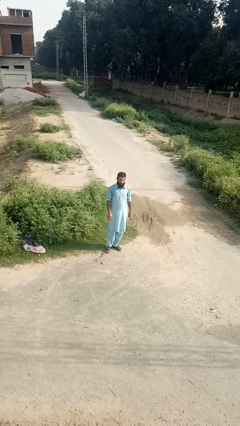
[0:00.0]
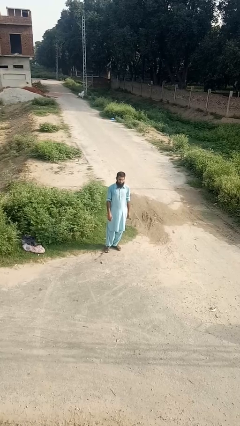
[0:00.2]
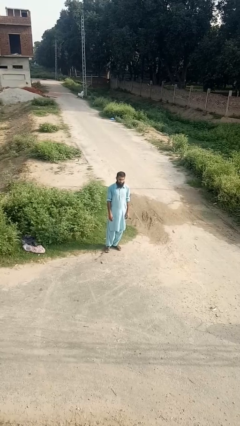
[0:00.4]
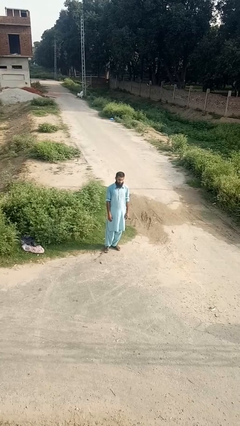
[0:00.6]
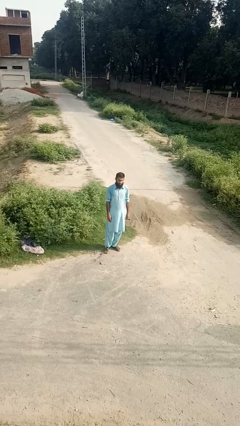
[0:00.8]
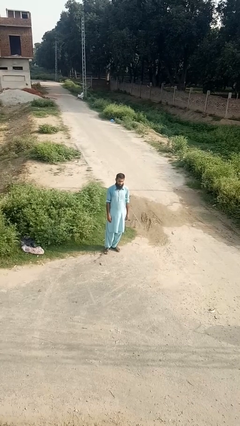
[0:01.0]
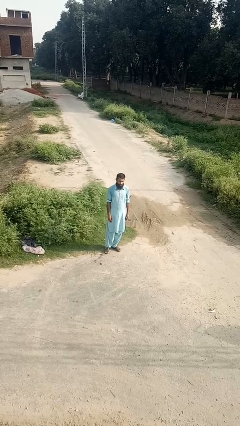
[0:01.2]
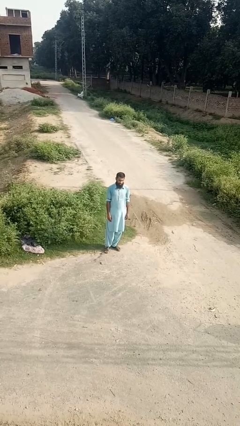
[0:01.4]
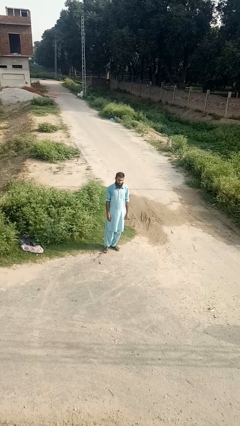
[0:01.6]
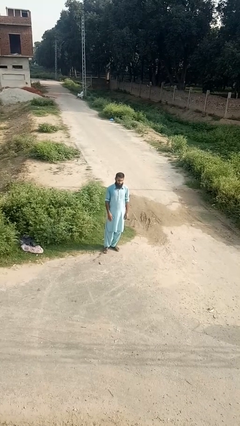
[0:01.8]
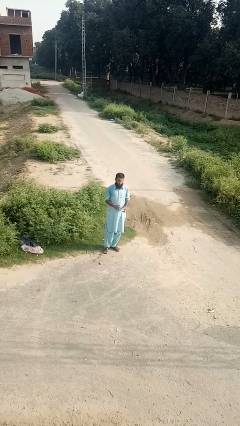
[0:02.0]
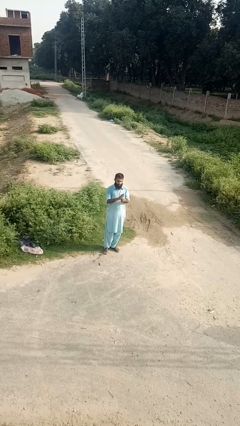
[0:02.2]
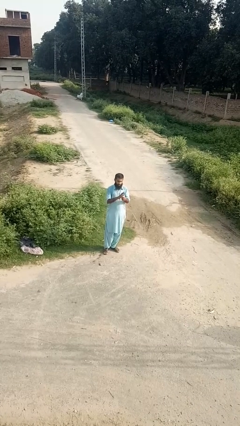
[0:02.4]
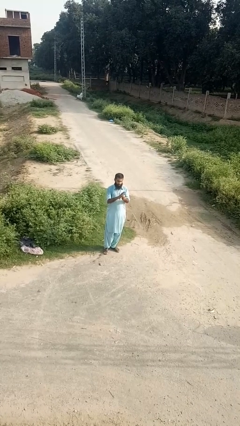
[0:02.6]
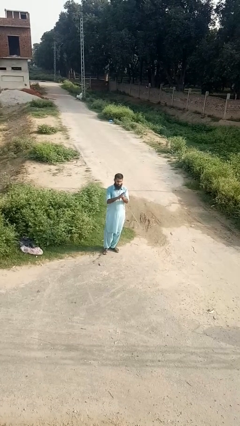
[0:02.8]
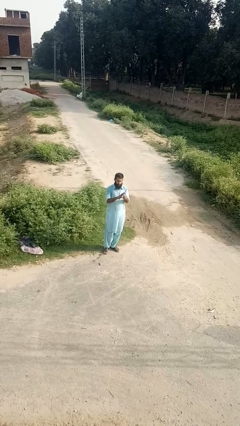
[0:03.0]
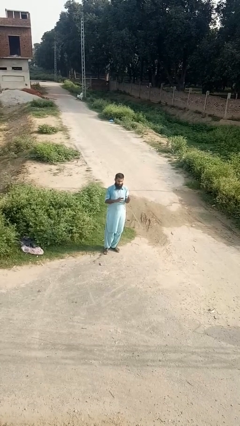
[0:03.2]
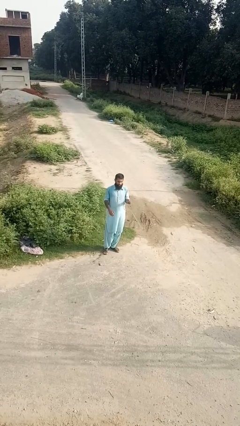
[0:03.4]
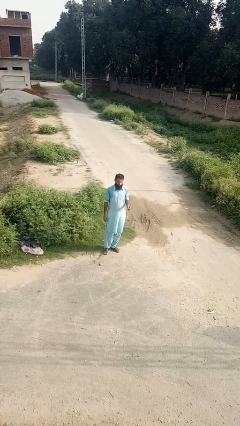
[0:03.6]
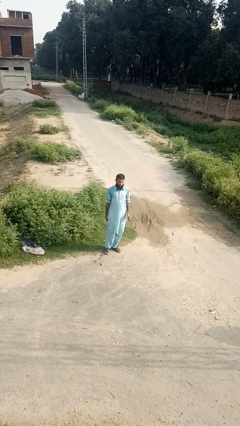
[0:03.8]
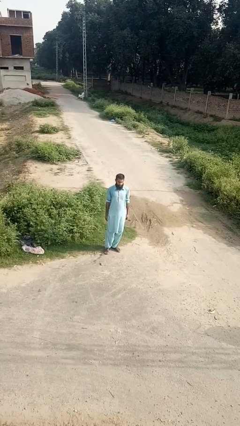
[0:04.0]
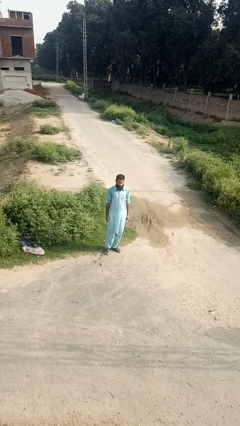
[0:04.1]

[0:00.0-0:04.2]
person takes off ring

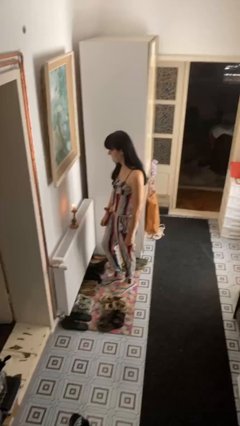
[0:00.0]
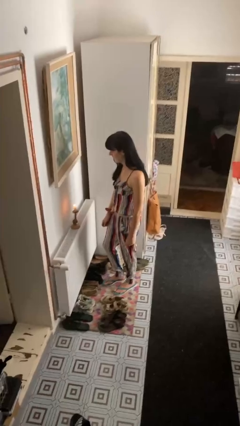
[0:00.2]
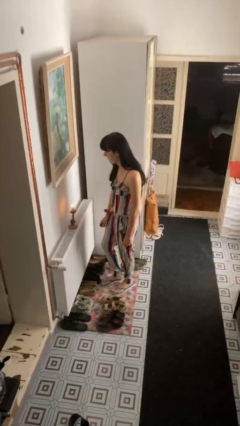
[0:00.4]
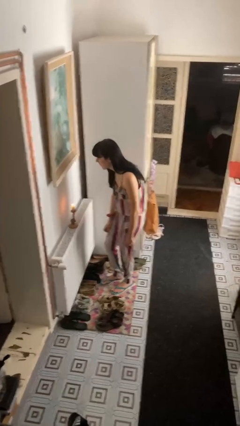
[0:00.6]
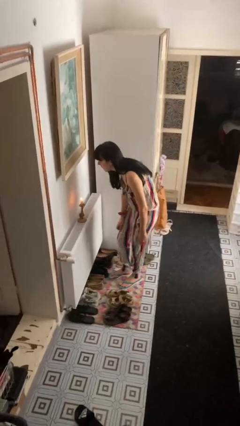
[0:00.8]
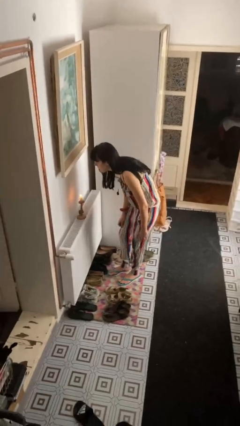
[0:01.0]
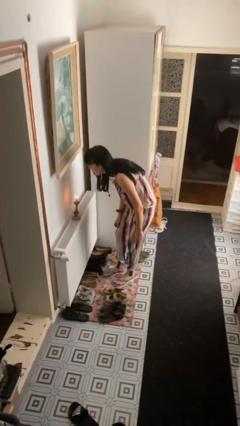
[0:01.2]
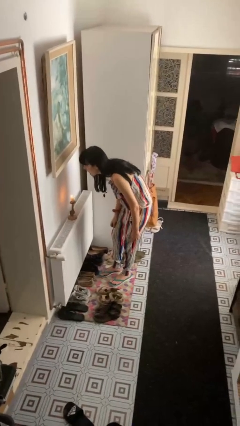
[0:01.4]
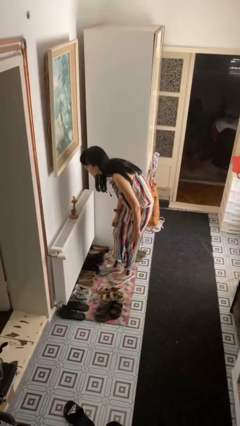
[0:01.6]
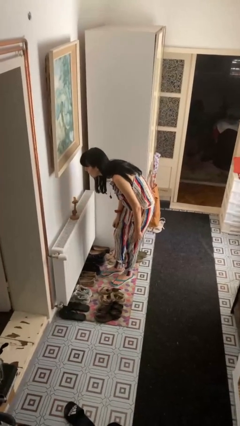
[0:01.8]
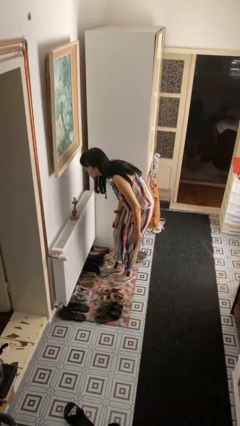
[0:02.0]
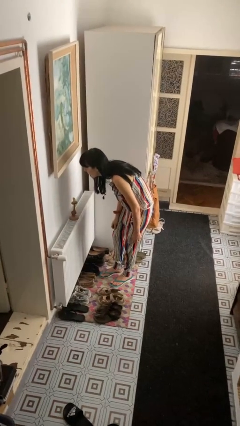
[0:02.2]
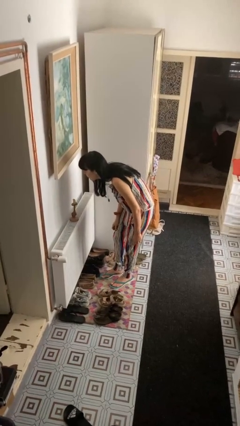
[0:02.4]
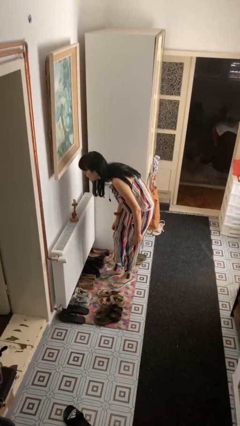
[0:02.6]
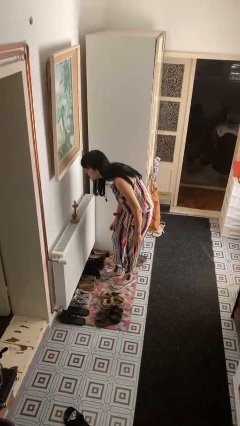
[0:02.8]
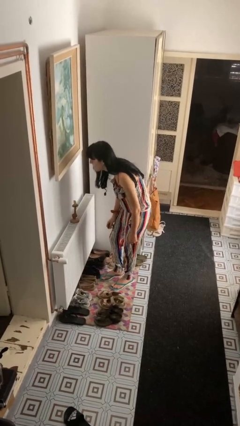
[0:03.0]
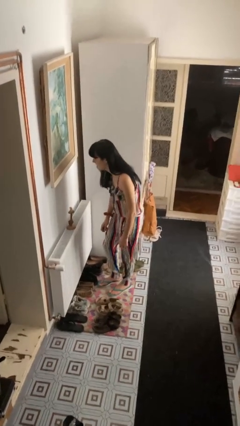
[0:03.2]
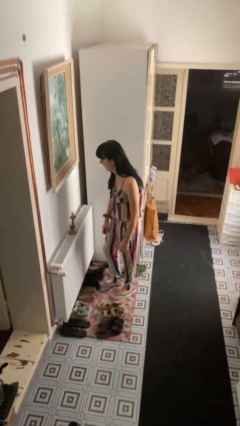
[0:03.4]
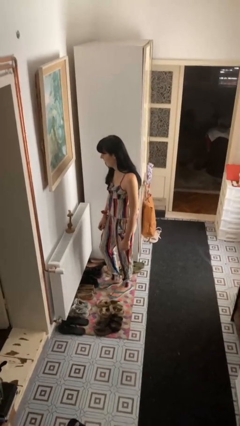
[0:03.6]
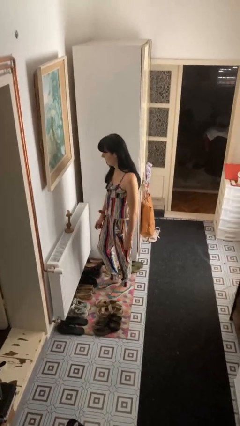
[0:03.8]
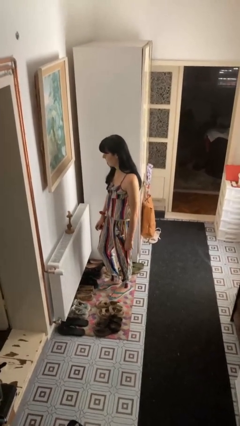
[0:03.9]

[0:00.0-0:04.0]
person extinguishes candle

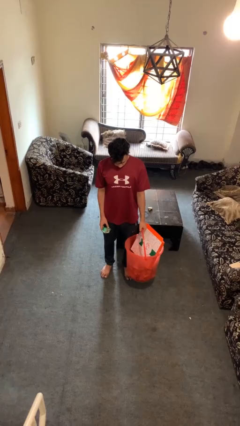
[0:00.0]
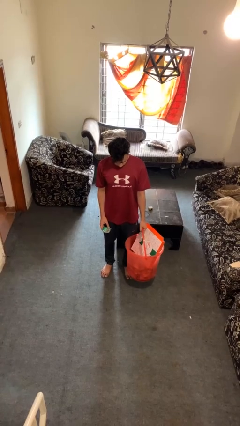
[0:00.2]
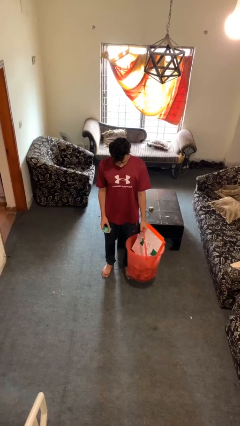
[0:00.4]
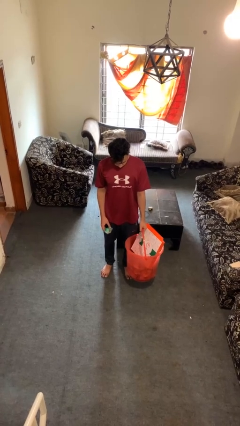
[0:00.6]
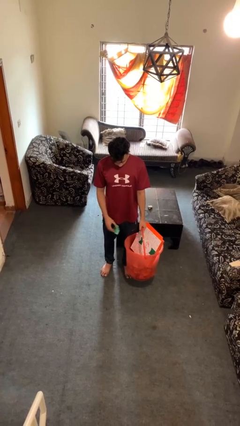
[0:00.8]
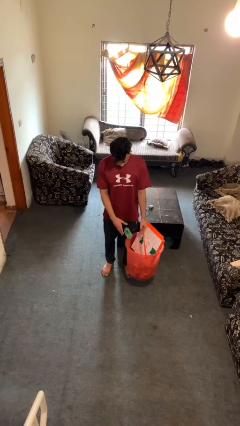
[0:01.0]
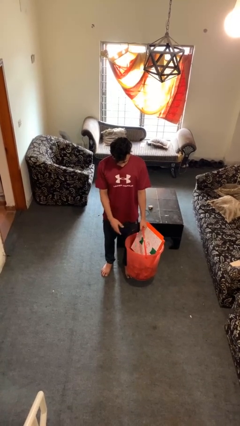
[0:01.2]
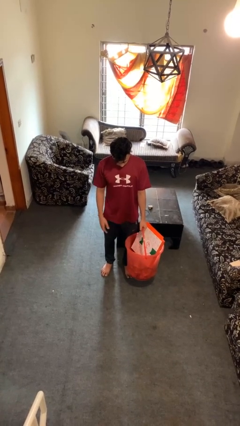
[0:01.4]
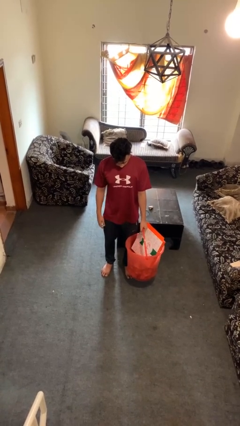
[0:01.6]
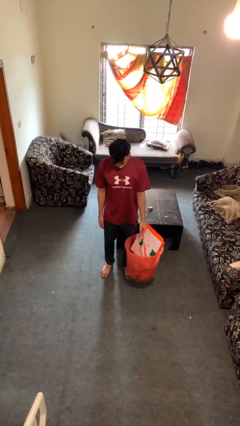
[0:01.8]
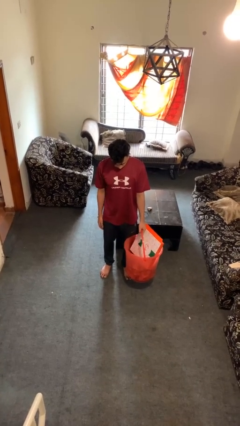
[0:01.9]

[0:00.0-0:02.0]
person puts object into basket

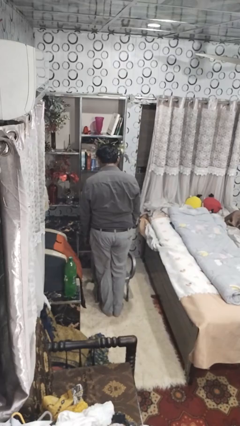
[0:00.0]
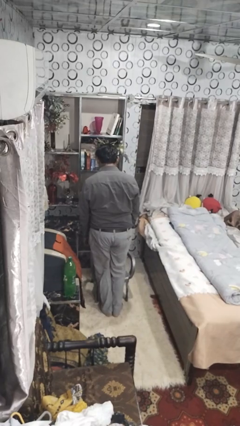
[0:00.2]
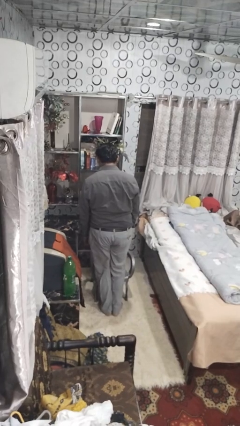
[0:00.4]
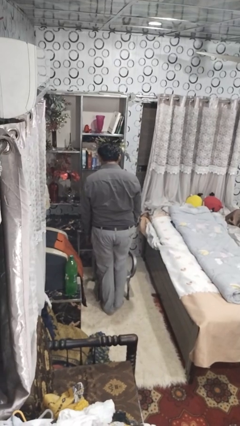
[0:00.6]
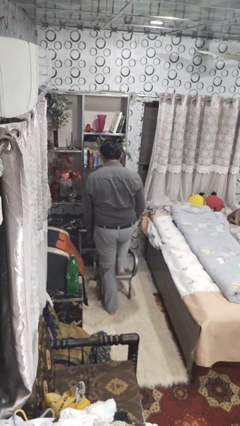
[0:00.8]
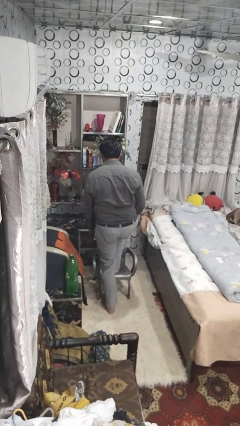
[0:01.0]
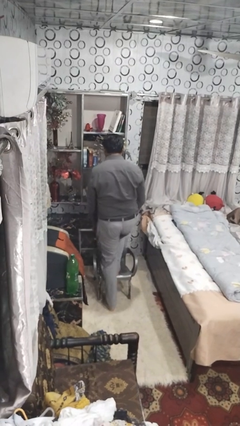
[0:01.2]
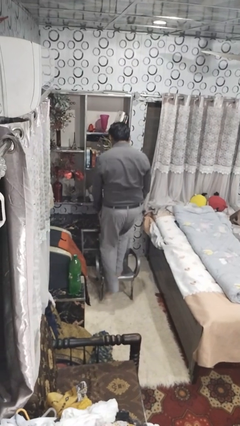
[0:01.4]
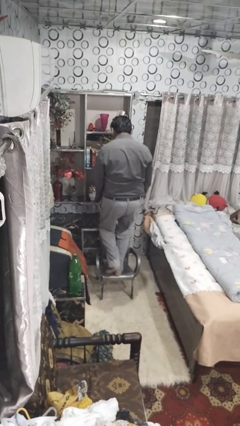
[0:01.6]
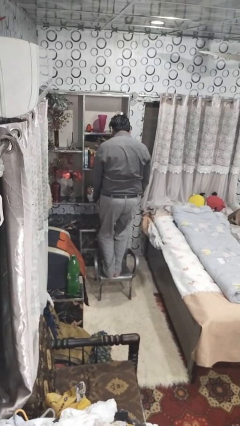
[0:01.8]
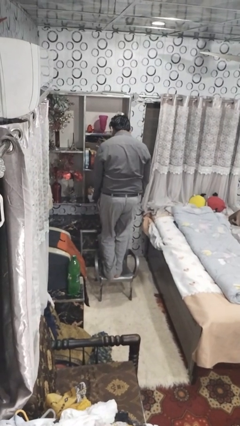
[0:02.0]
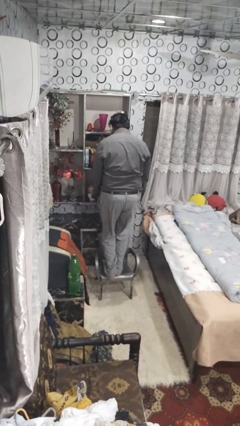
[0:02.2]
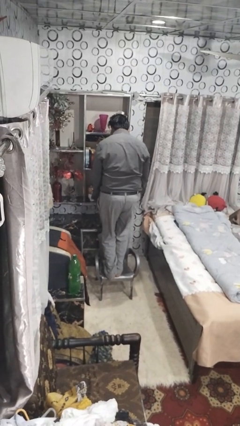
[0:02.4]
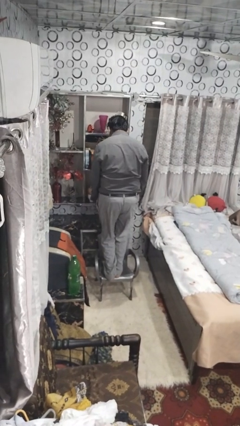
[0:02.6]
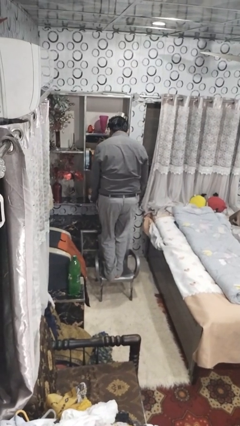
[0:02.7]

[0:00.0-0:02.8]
person climbs on chair

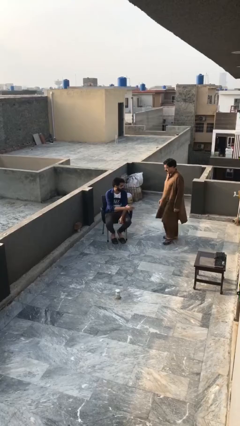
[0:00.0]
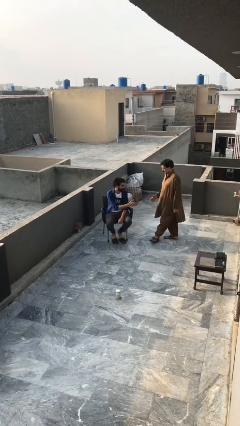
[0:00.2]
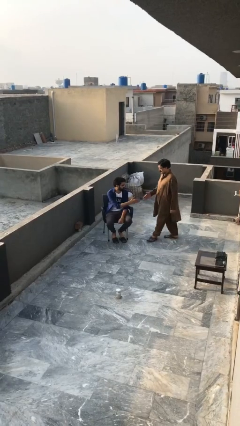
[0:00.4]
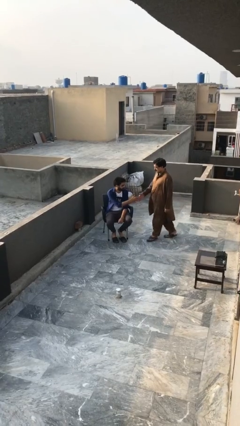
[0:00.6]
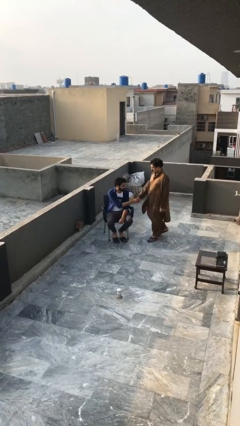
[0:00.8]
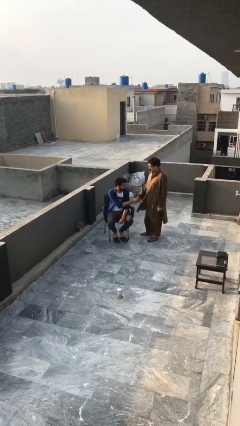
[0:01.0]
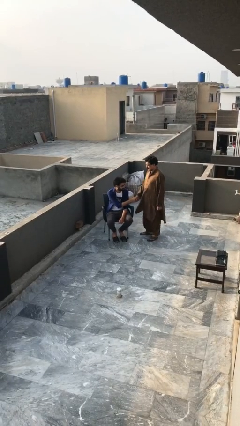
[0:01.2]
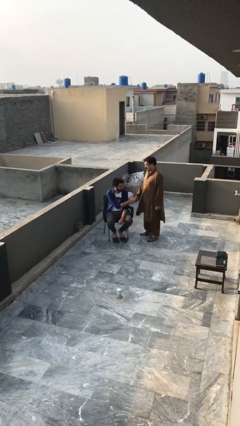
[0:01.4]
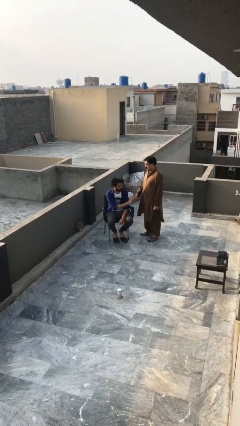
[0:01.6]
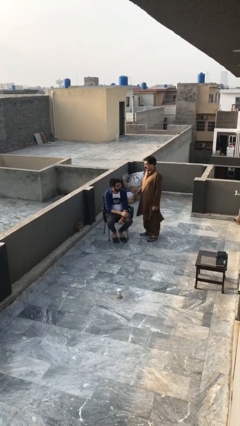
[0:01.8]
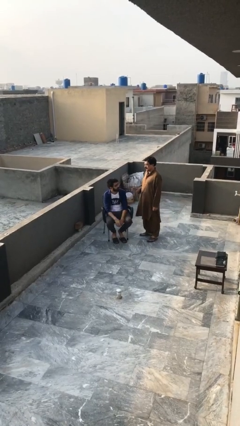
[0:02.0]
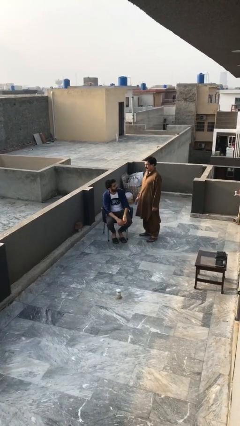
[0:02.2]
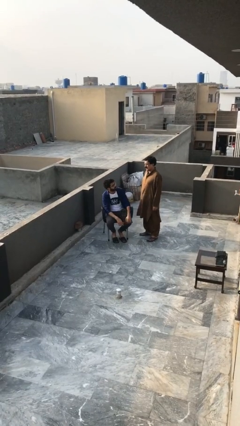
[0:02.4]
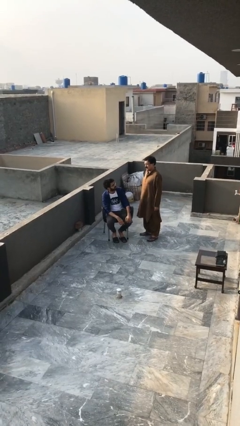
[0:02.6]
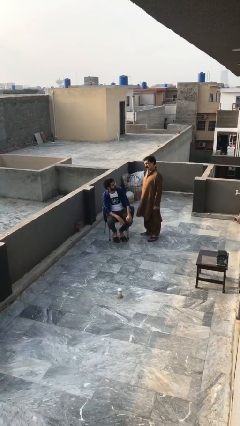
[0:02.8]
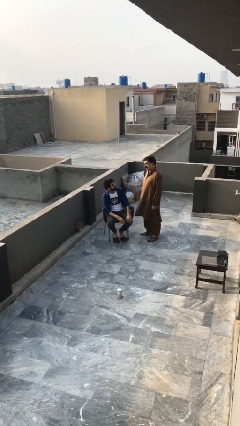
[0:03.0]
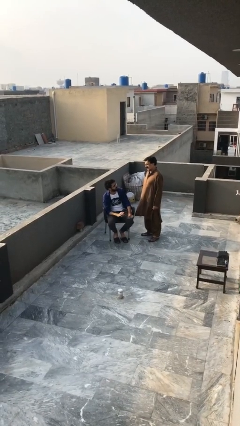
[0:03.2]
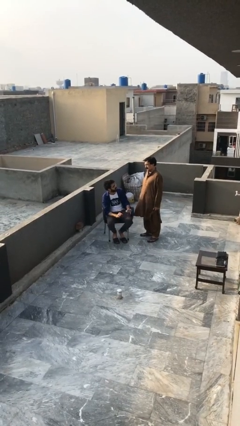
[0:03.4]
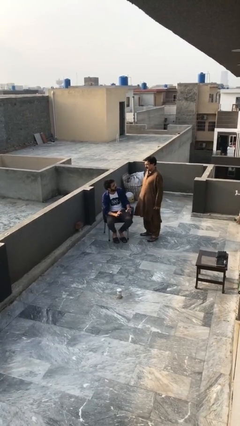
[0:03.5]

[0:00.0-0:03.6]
person shakes hand
